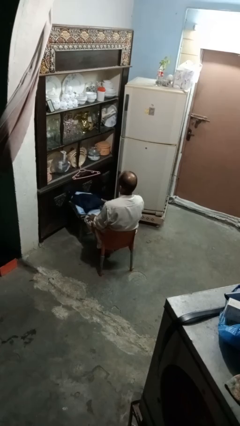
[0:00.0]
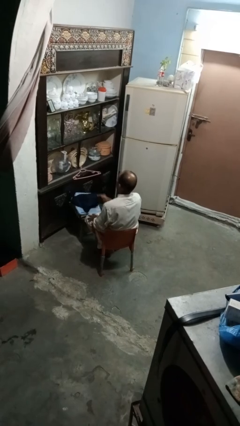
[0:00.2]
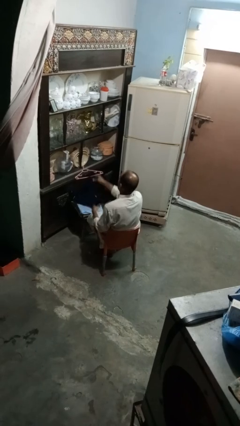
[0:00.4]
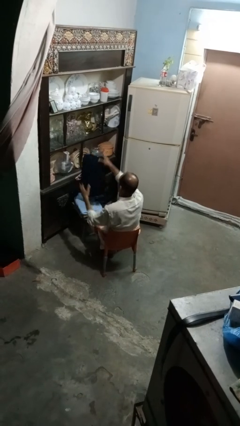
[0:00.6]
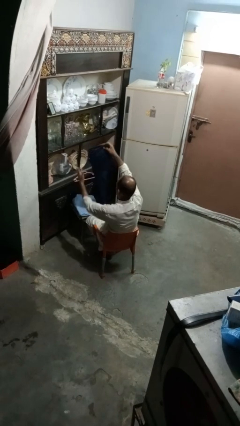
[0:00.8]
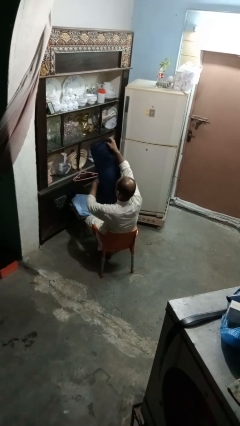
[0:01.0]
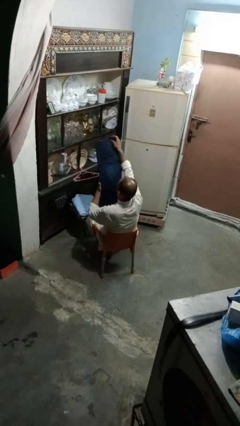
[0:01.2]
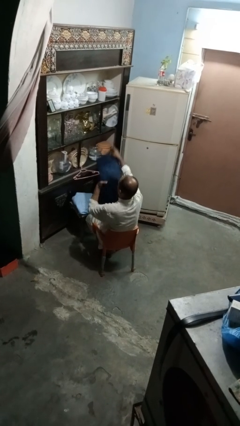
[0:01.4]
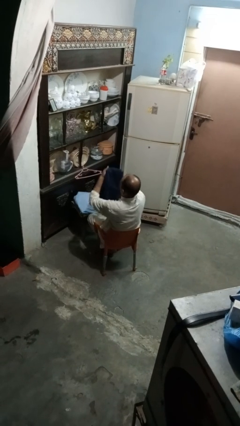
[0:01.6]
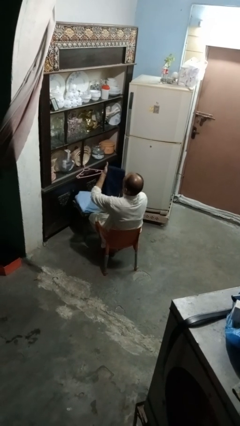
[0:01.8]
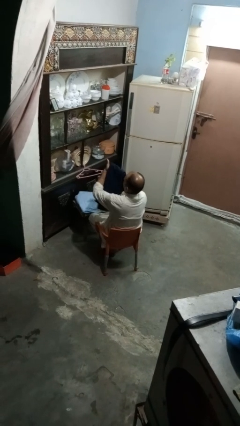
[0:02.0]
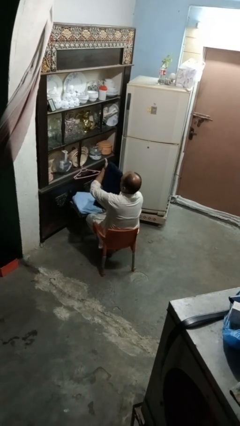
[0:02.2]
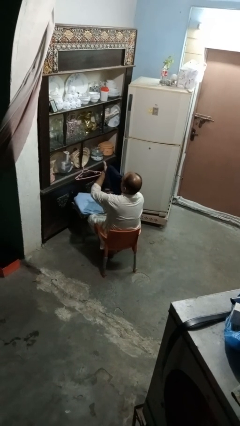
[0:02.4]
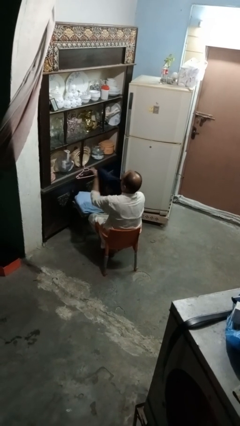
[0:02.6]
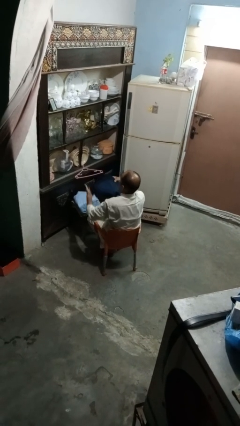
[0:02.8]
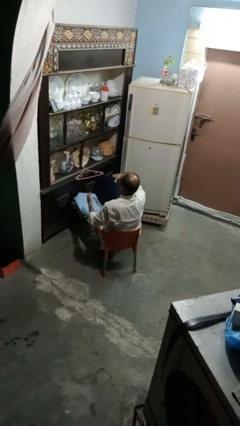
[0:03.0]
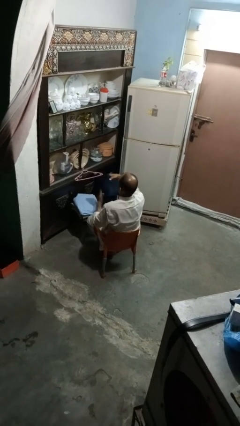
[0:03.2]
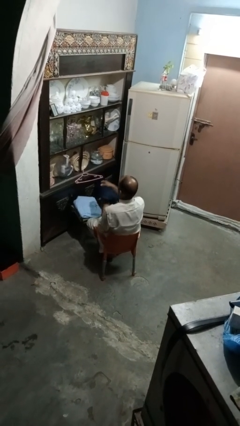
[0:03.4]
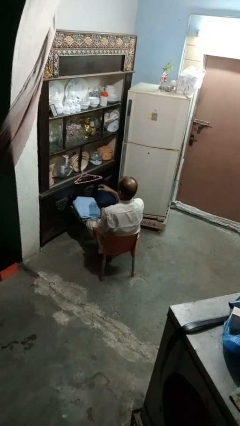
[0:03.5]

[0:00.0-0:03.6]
person folds pants

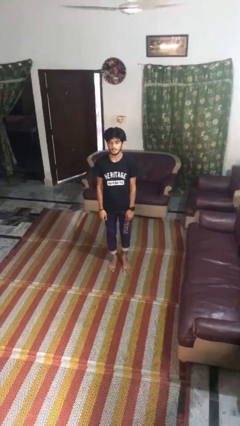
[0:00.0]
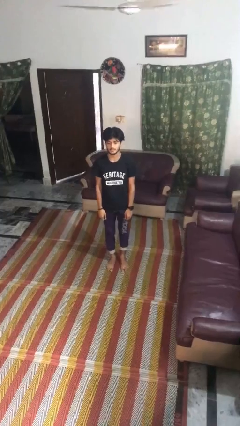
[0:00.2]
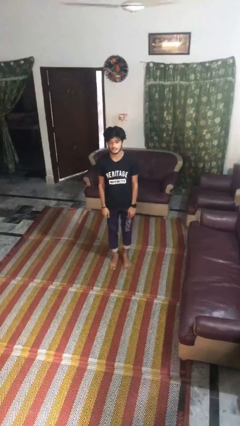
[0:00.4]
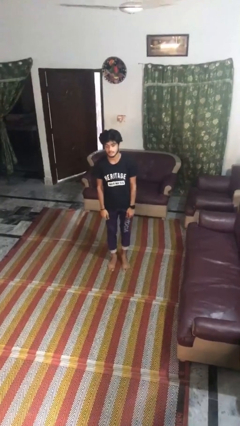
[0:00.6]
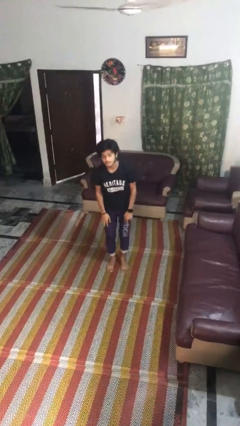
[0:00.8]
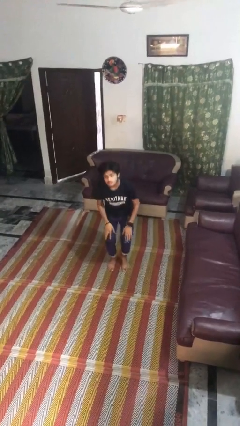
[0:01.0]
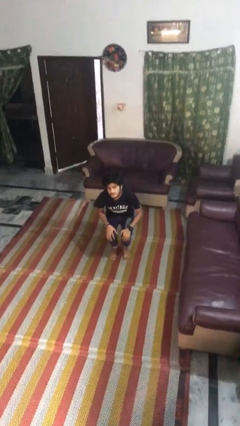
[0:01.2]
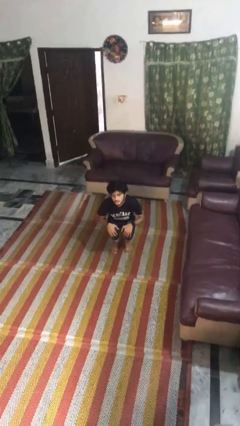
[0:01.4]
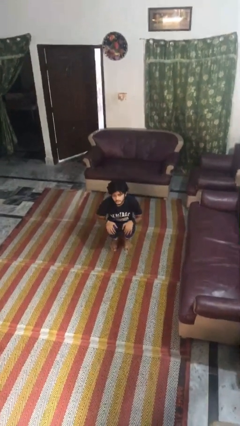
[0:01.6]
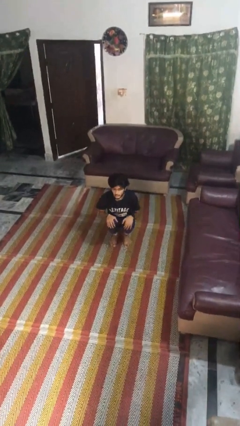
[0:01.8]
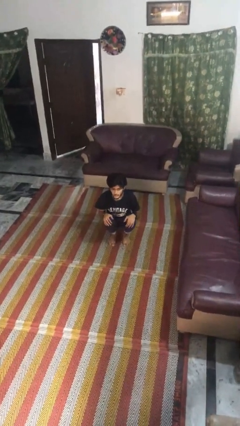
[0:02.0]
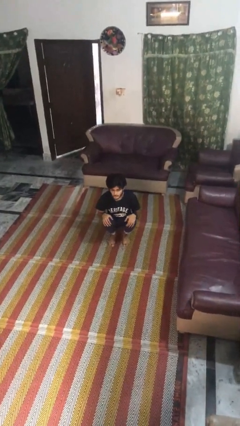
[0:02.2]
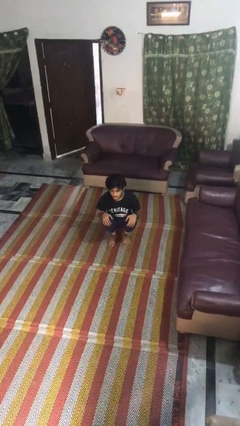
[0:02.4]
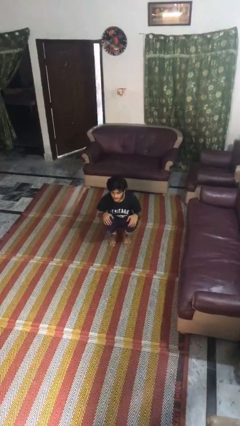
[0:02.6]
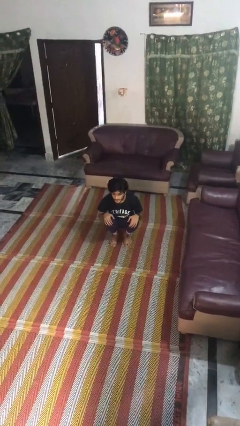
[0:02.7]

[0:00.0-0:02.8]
person squats

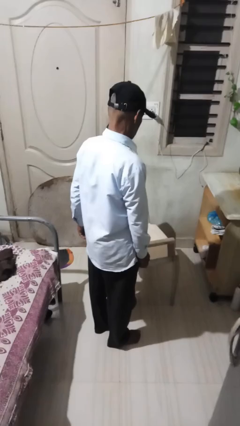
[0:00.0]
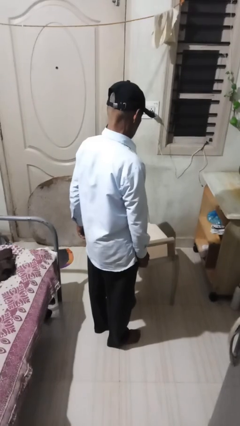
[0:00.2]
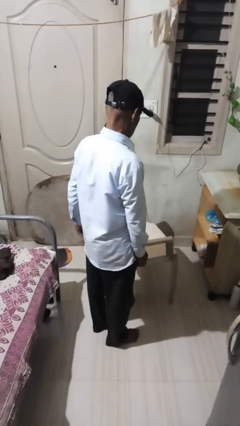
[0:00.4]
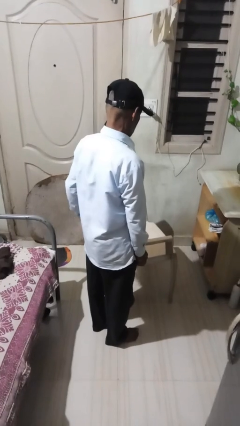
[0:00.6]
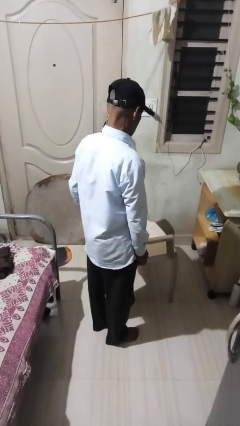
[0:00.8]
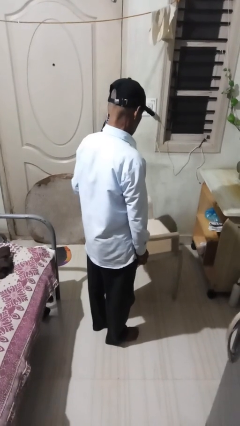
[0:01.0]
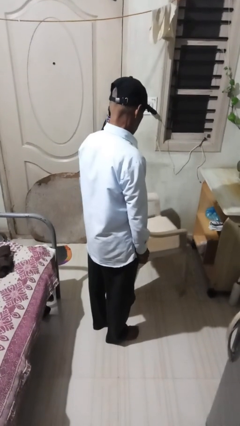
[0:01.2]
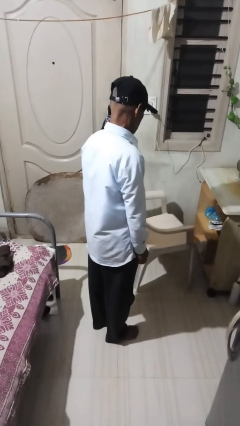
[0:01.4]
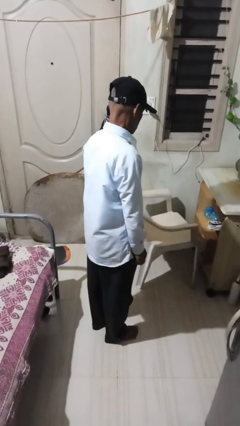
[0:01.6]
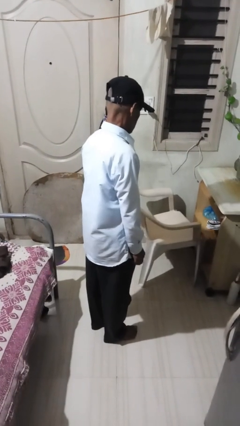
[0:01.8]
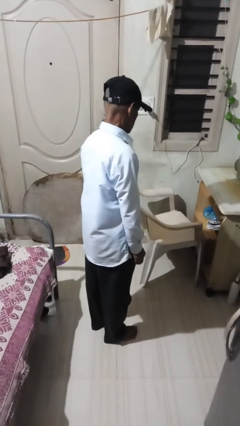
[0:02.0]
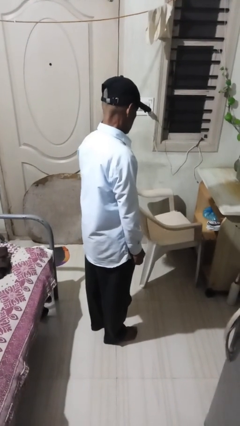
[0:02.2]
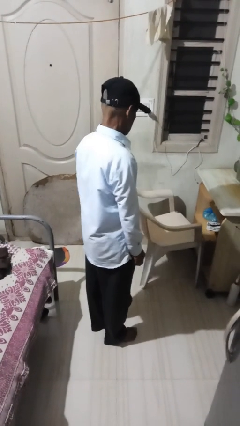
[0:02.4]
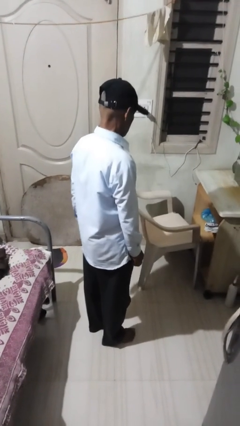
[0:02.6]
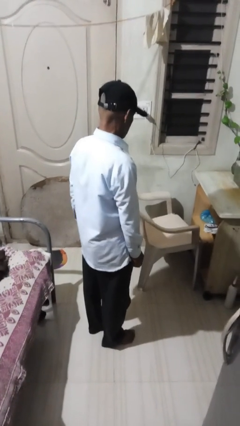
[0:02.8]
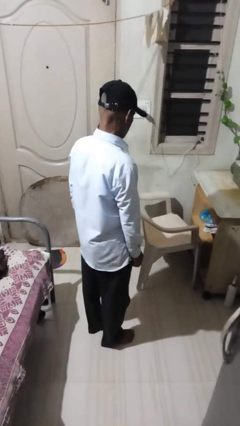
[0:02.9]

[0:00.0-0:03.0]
person pushes in chair

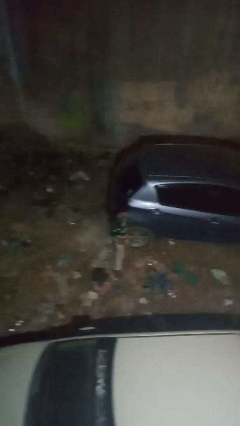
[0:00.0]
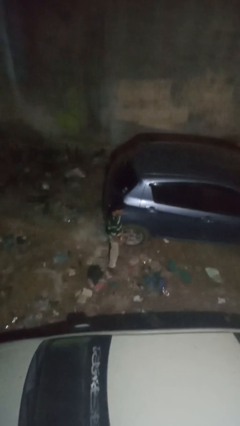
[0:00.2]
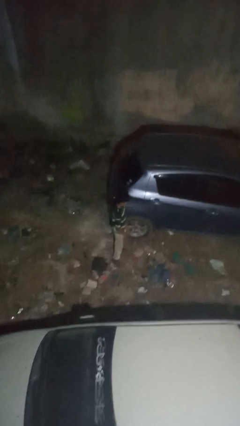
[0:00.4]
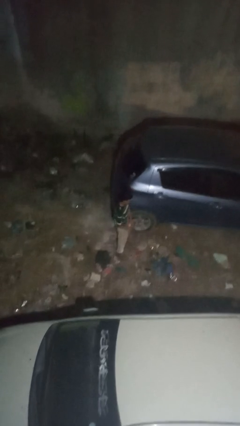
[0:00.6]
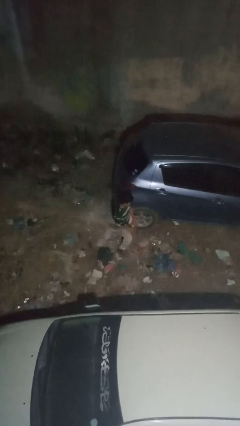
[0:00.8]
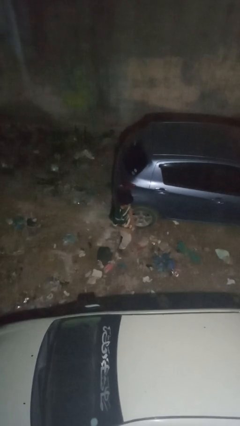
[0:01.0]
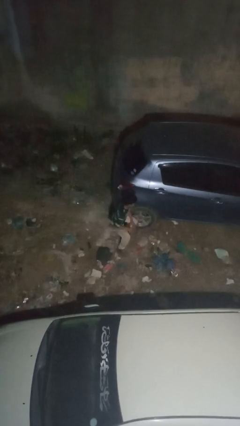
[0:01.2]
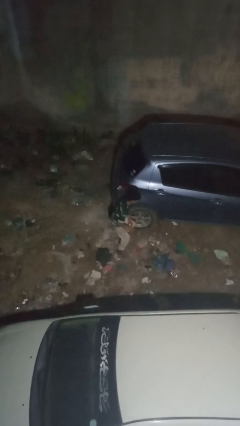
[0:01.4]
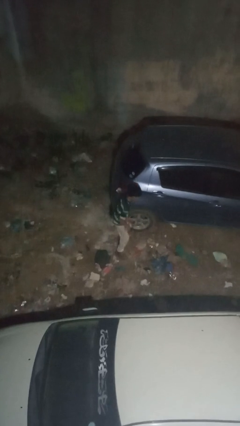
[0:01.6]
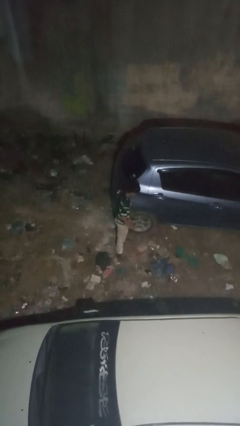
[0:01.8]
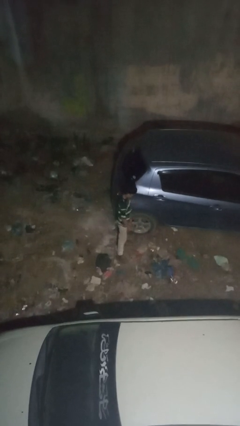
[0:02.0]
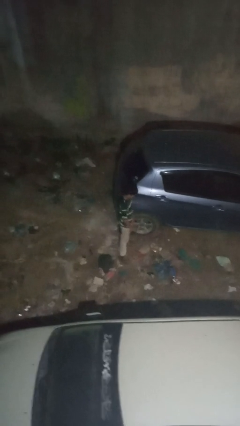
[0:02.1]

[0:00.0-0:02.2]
person kicks car tires

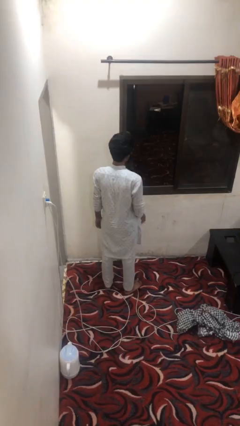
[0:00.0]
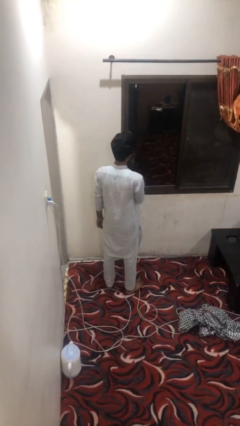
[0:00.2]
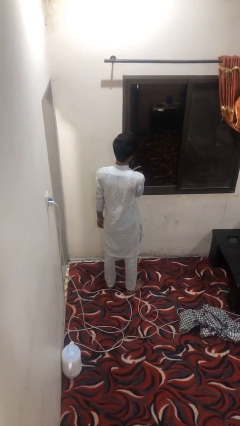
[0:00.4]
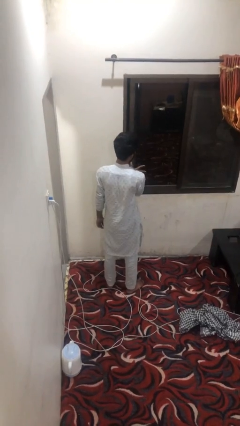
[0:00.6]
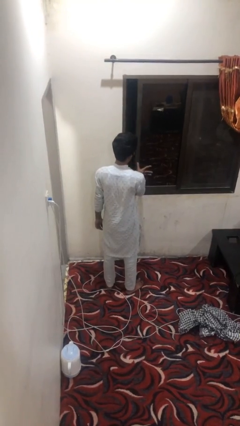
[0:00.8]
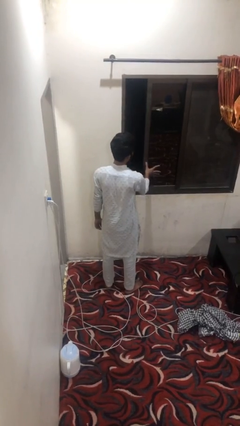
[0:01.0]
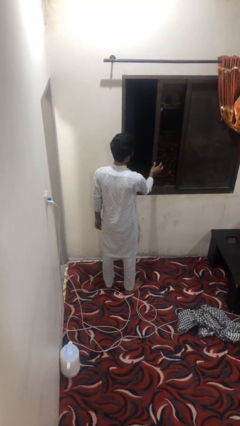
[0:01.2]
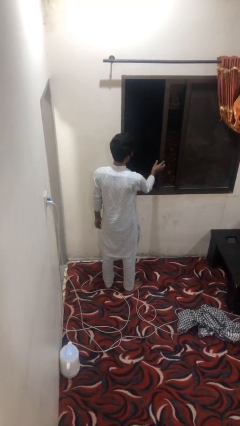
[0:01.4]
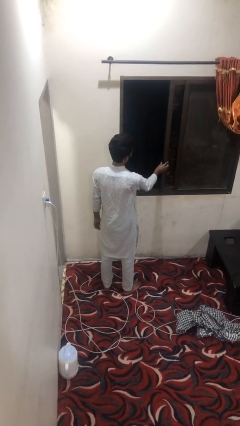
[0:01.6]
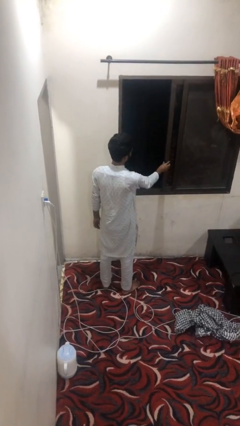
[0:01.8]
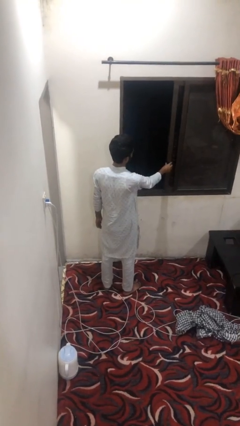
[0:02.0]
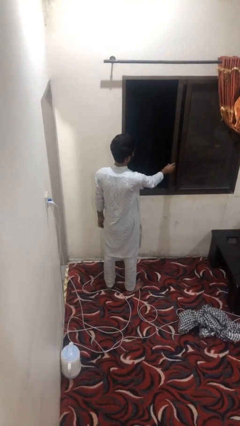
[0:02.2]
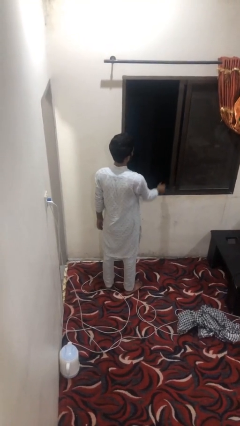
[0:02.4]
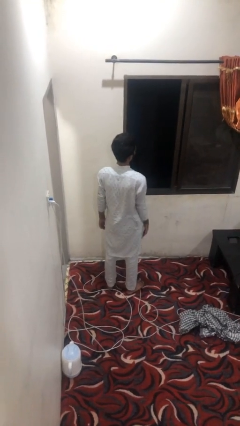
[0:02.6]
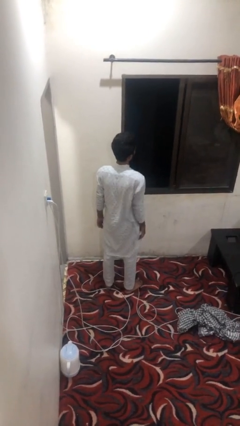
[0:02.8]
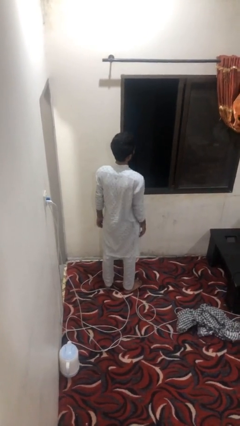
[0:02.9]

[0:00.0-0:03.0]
person opens home window

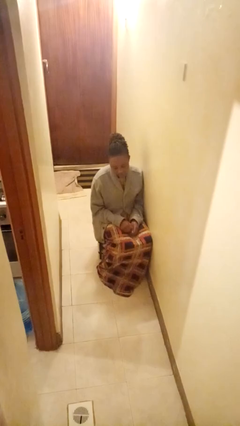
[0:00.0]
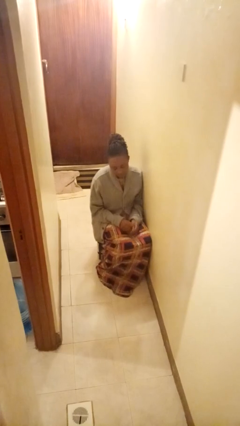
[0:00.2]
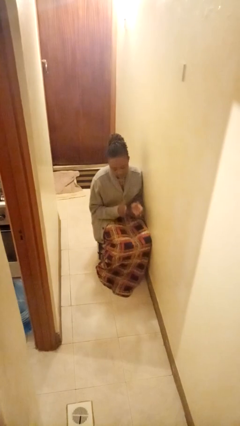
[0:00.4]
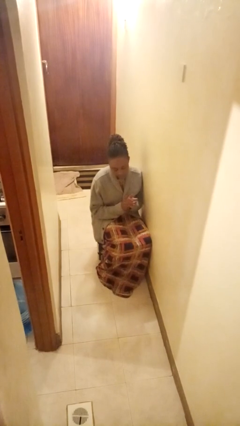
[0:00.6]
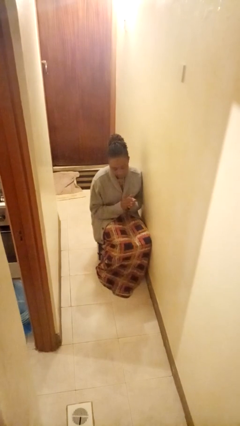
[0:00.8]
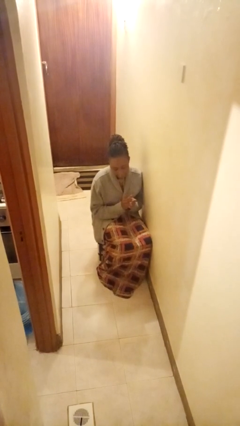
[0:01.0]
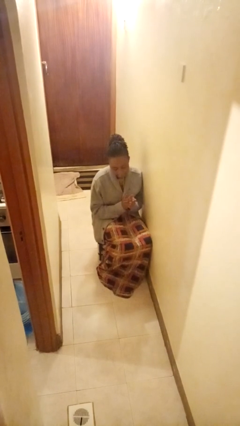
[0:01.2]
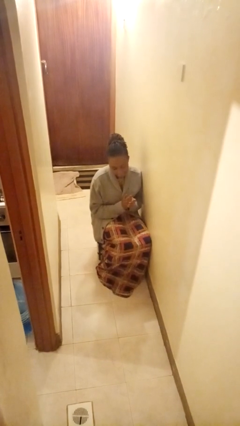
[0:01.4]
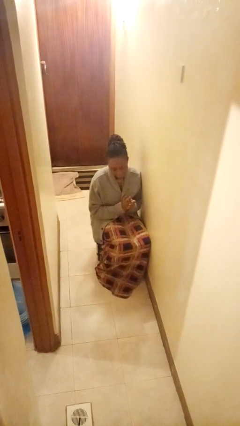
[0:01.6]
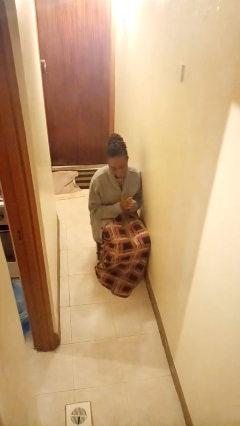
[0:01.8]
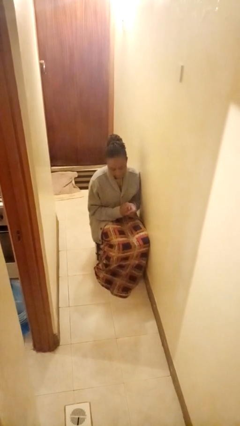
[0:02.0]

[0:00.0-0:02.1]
person claps hands

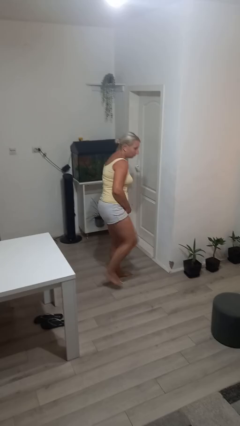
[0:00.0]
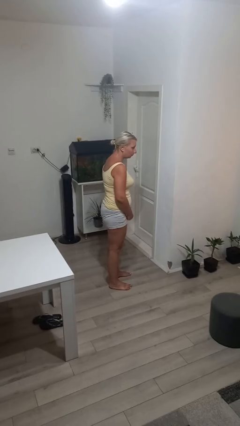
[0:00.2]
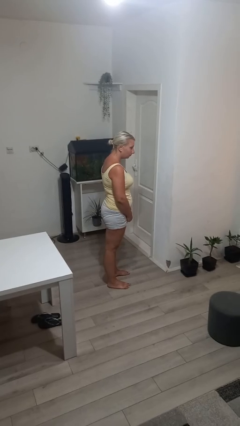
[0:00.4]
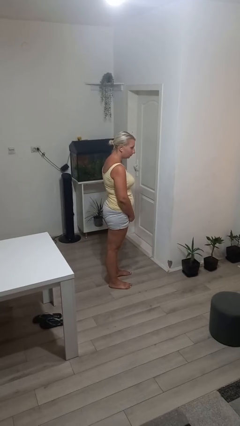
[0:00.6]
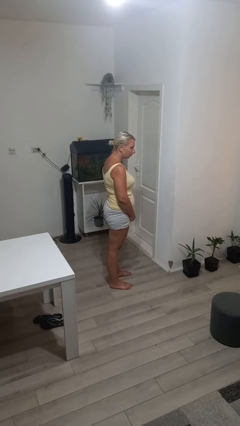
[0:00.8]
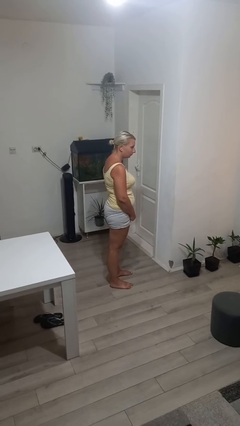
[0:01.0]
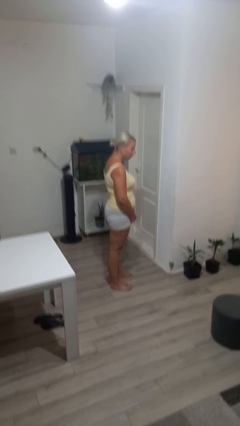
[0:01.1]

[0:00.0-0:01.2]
person karate kicks
